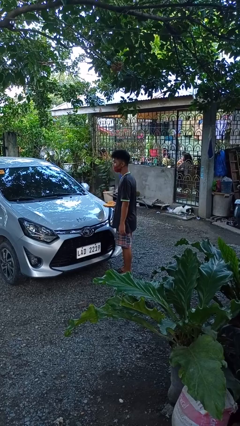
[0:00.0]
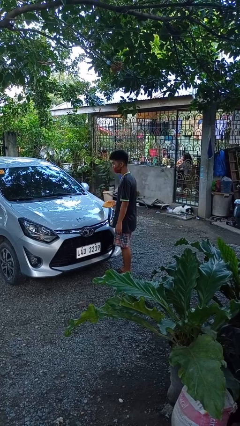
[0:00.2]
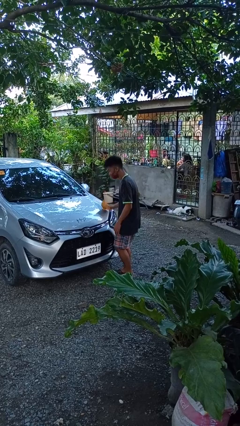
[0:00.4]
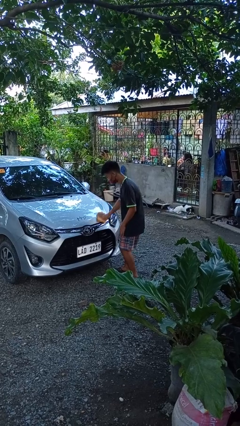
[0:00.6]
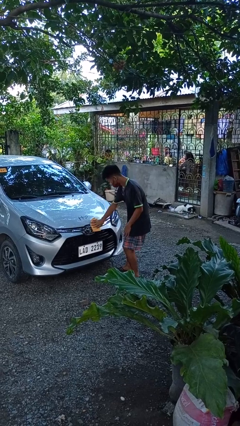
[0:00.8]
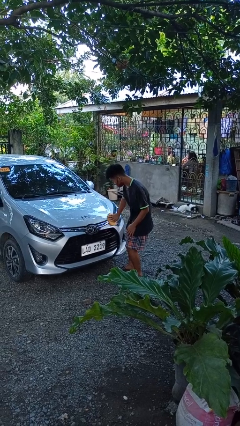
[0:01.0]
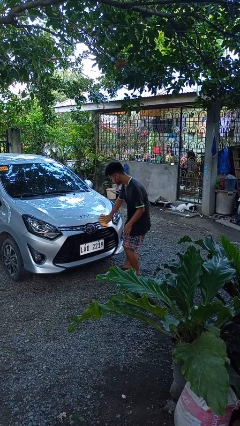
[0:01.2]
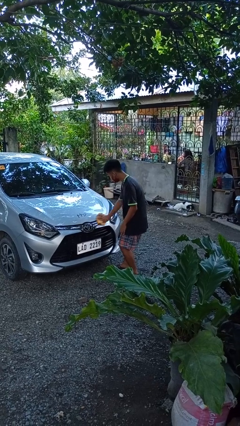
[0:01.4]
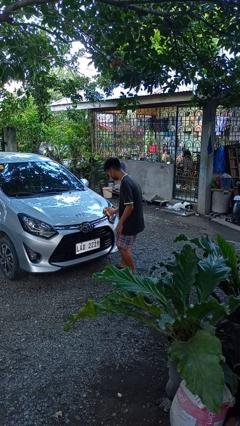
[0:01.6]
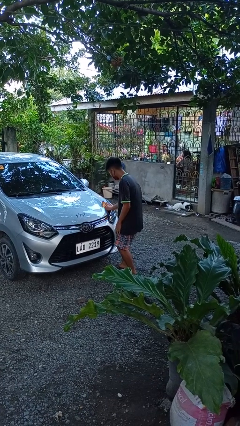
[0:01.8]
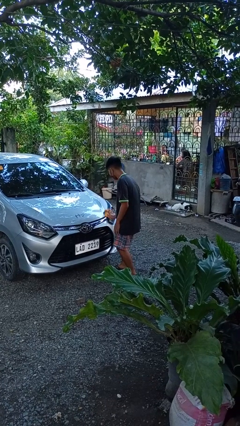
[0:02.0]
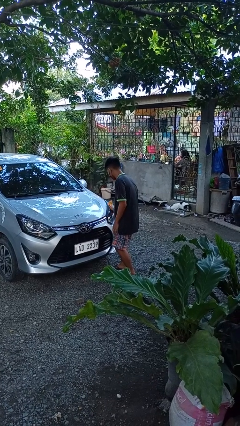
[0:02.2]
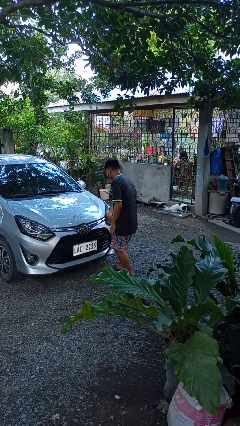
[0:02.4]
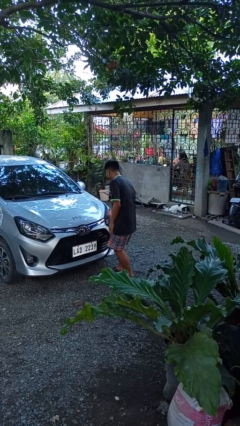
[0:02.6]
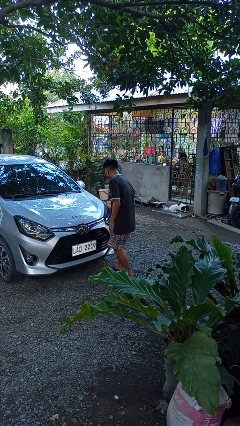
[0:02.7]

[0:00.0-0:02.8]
person polishes car with rag

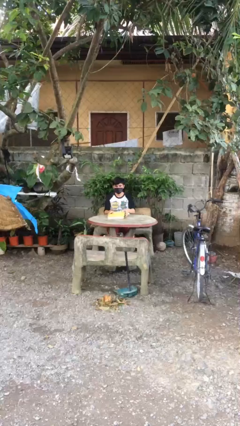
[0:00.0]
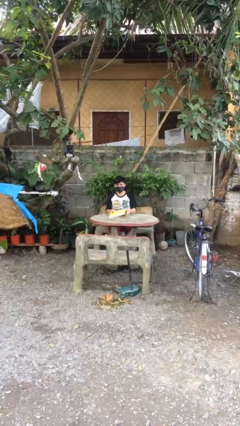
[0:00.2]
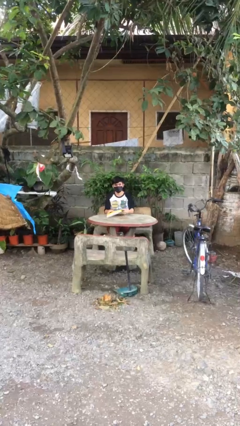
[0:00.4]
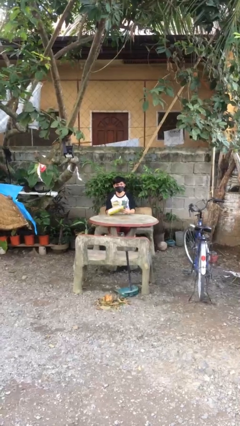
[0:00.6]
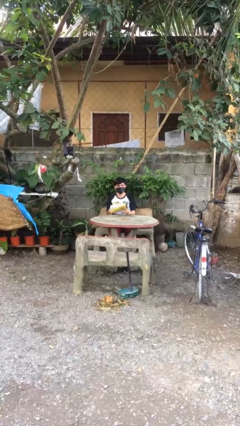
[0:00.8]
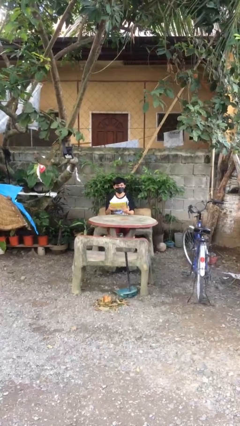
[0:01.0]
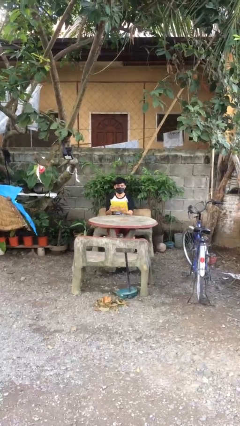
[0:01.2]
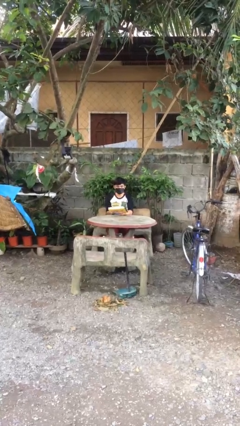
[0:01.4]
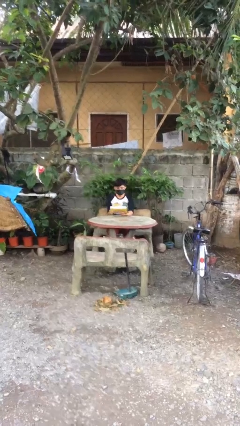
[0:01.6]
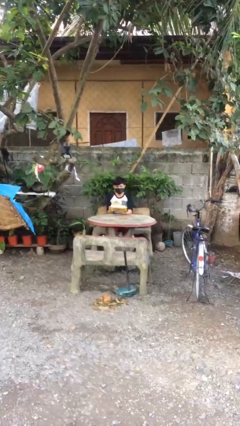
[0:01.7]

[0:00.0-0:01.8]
person picks up object from table

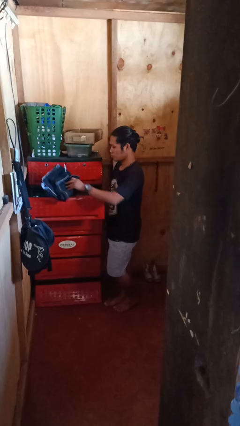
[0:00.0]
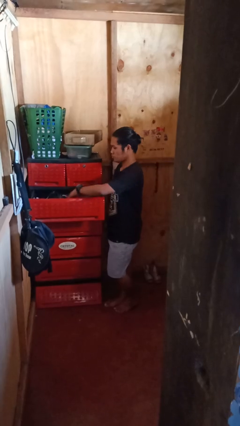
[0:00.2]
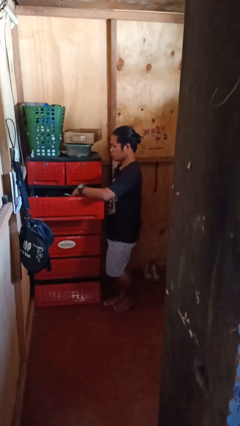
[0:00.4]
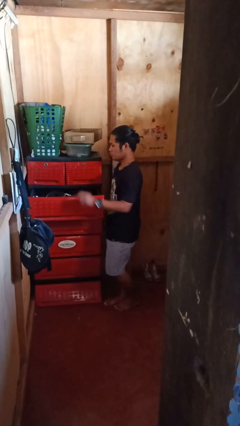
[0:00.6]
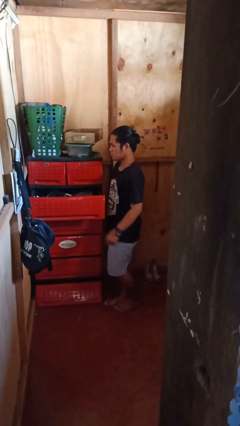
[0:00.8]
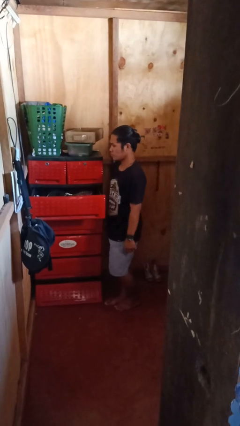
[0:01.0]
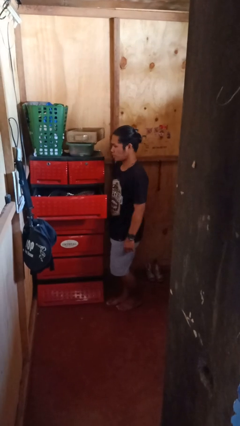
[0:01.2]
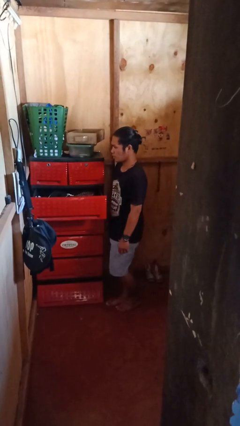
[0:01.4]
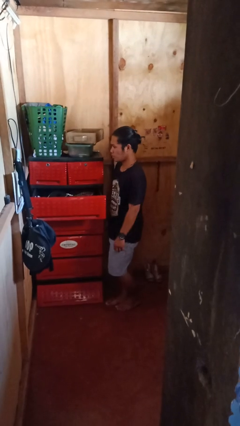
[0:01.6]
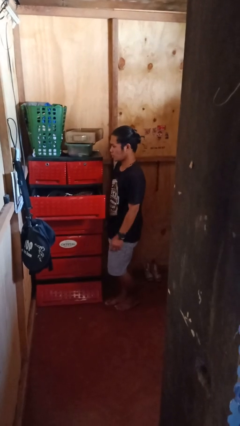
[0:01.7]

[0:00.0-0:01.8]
person puts clothes into dresser

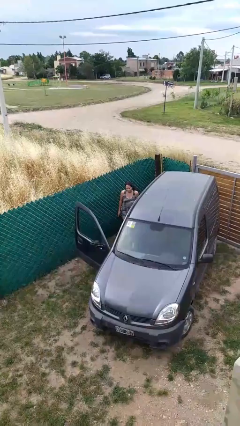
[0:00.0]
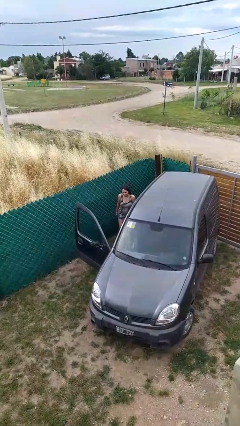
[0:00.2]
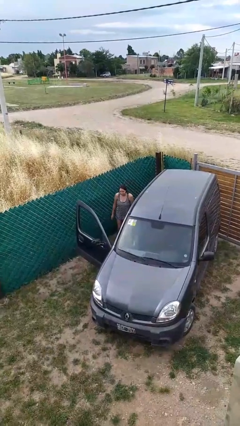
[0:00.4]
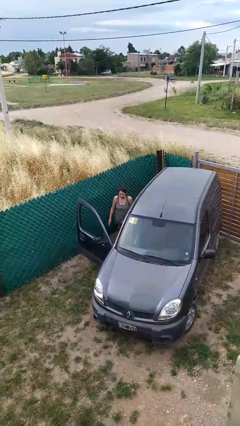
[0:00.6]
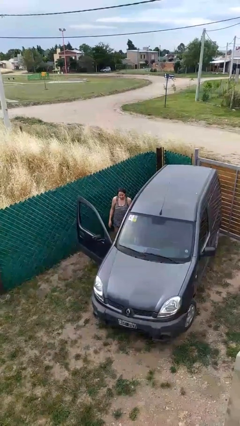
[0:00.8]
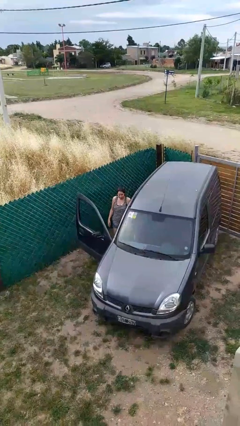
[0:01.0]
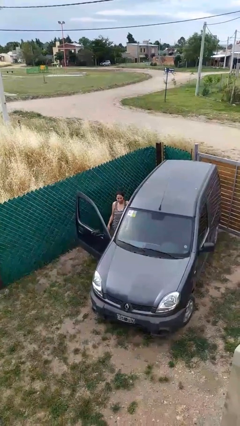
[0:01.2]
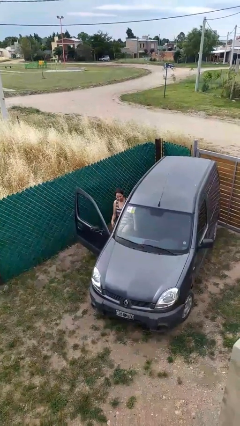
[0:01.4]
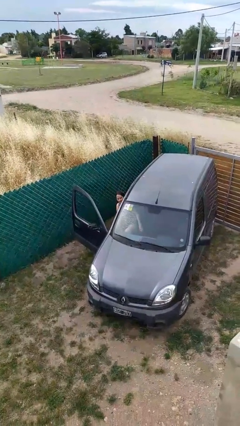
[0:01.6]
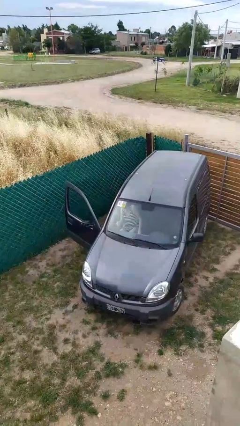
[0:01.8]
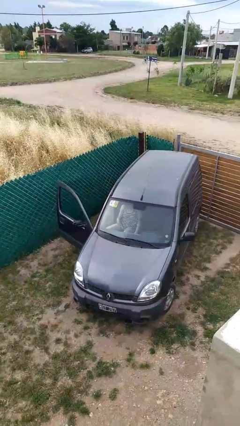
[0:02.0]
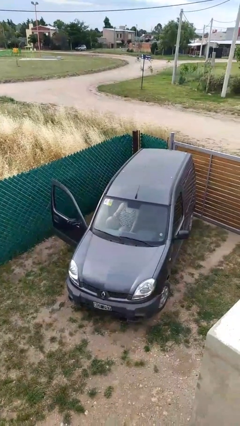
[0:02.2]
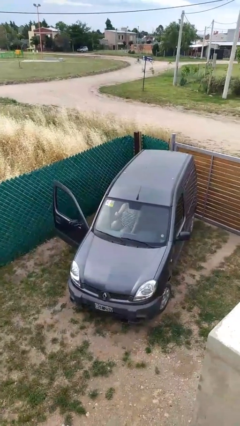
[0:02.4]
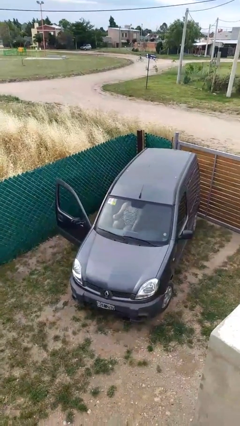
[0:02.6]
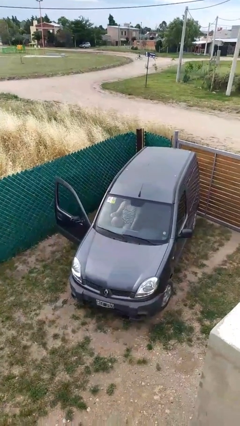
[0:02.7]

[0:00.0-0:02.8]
person enters car

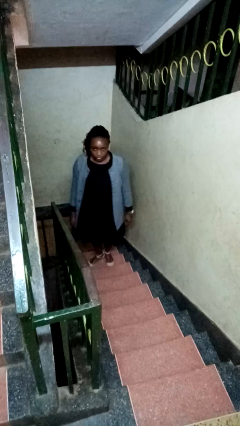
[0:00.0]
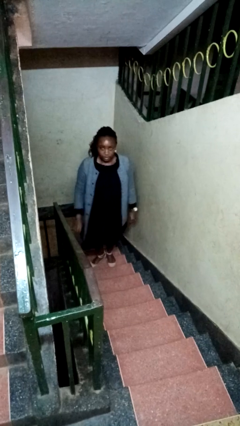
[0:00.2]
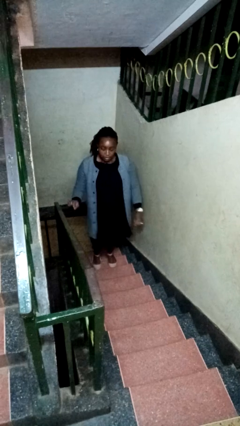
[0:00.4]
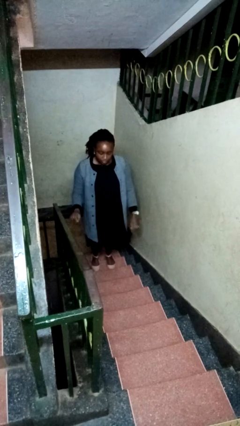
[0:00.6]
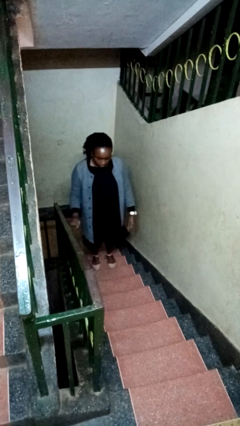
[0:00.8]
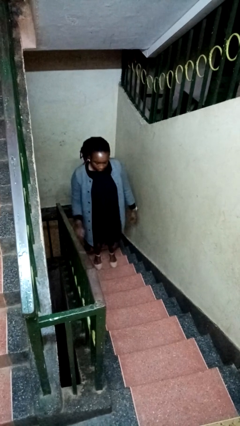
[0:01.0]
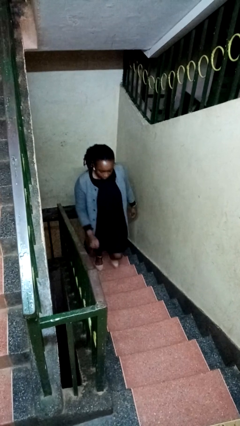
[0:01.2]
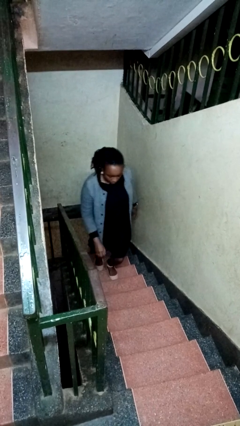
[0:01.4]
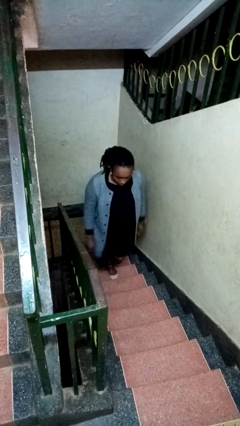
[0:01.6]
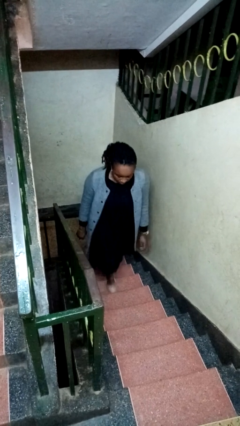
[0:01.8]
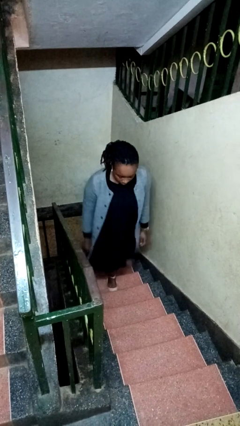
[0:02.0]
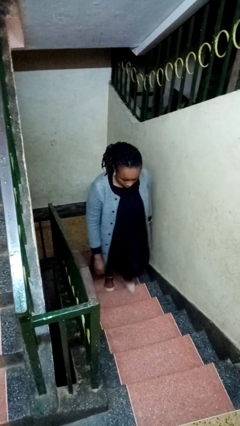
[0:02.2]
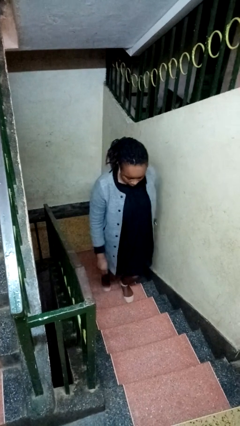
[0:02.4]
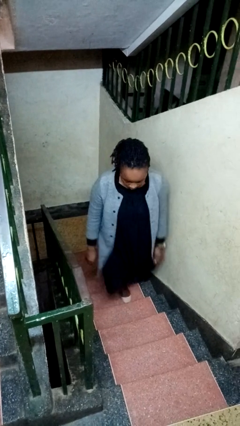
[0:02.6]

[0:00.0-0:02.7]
person climbs up stairs

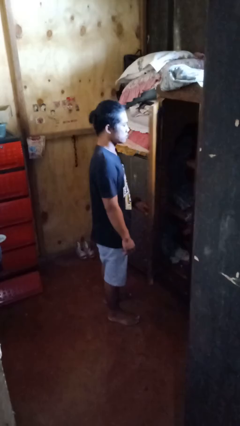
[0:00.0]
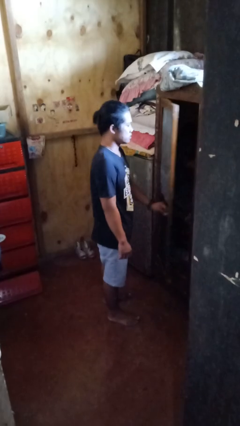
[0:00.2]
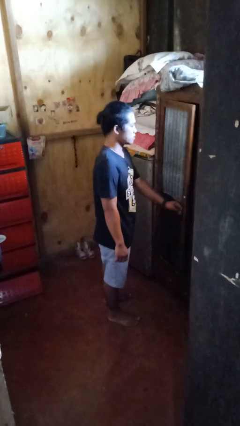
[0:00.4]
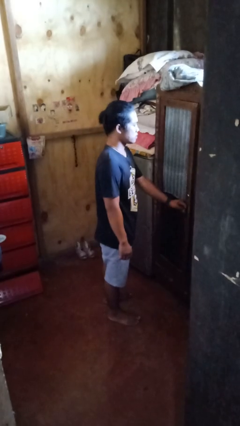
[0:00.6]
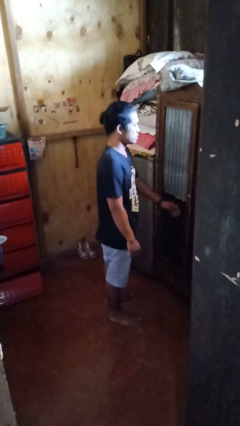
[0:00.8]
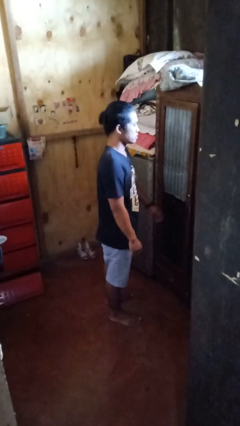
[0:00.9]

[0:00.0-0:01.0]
person closes closet door

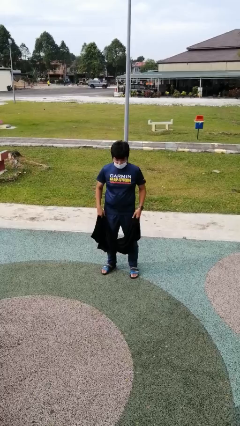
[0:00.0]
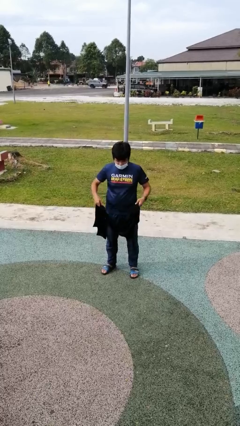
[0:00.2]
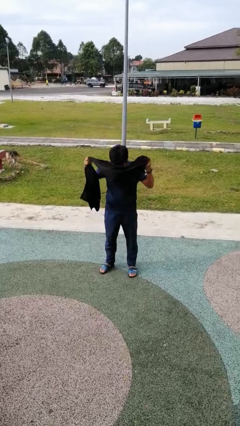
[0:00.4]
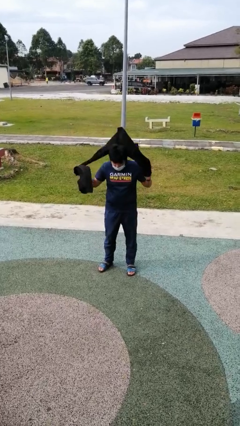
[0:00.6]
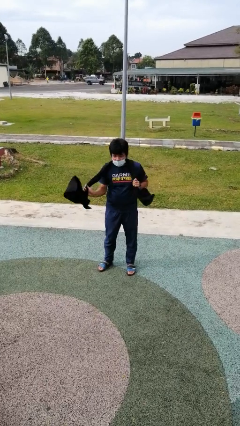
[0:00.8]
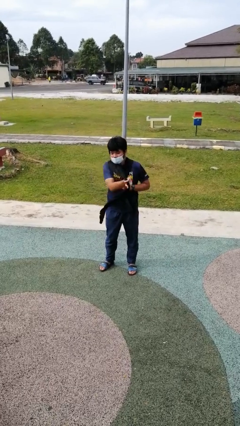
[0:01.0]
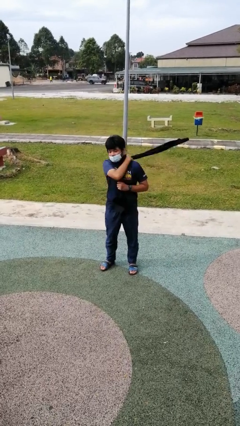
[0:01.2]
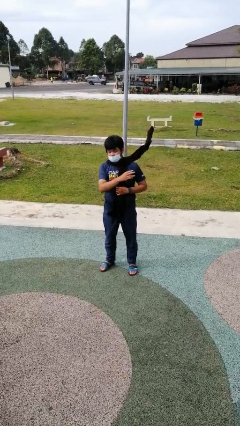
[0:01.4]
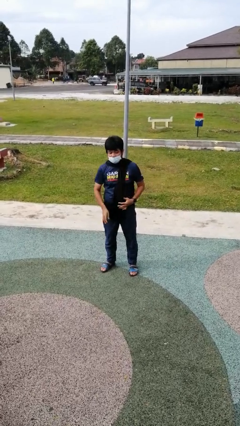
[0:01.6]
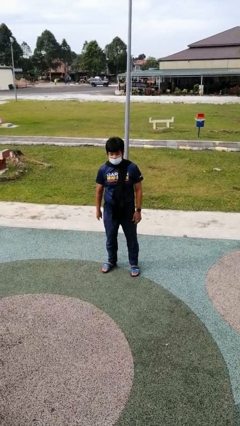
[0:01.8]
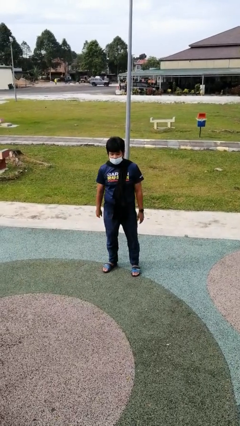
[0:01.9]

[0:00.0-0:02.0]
person puts on scarf

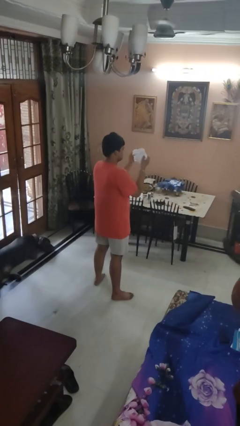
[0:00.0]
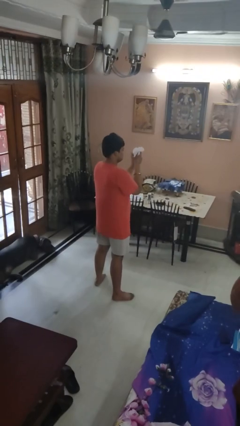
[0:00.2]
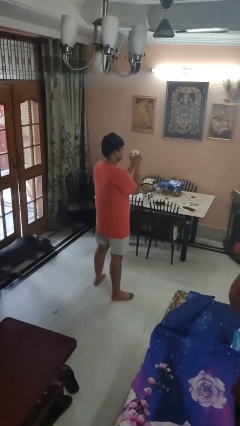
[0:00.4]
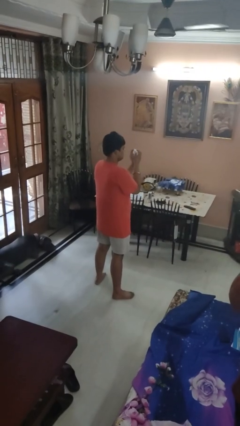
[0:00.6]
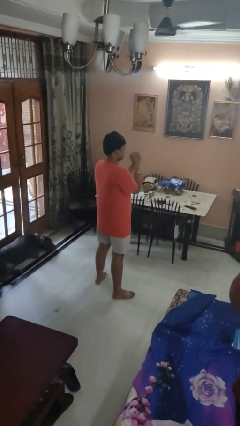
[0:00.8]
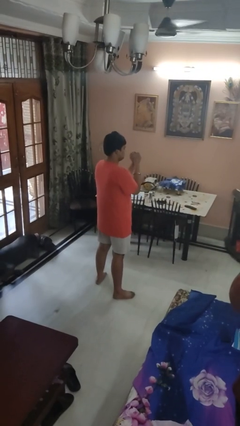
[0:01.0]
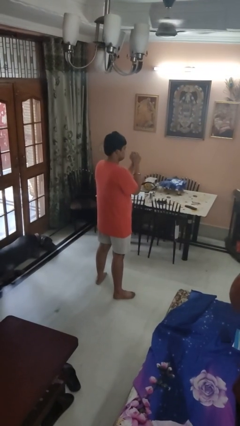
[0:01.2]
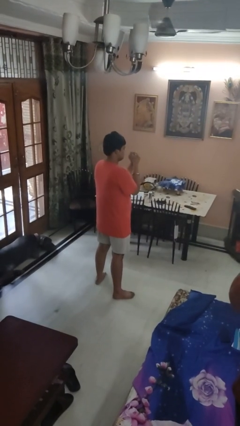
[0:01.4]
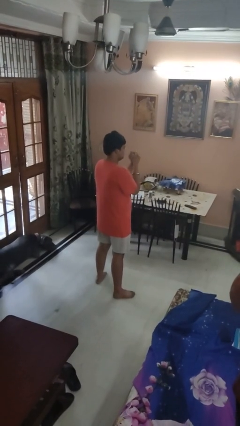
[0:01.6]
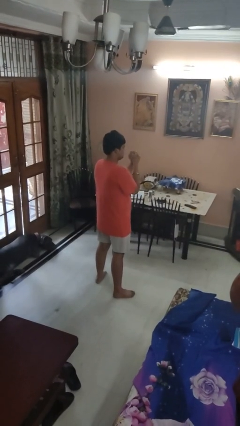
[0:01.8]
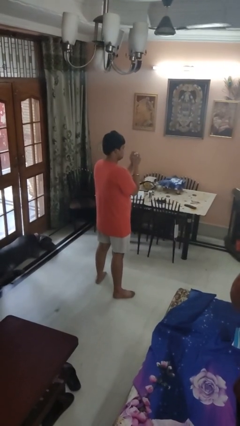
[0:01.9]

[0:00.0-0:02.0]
person crumples paper
